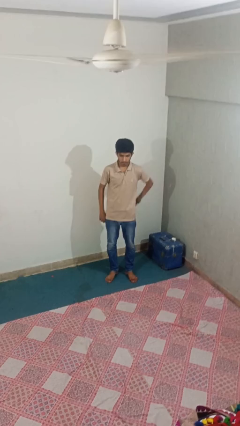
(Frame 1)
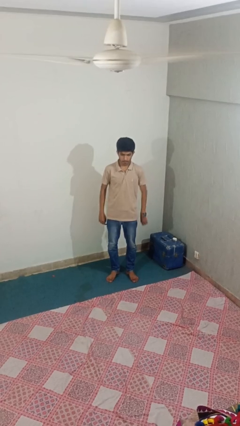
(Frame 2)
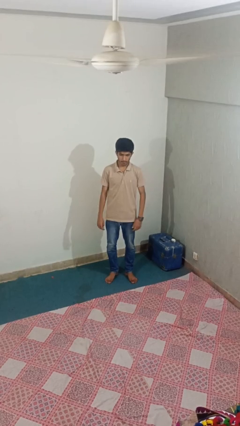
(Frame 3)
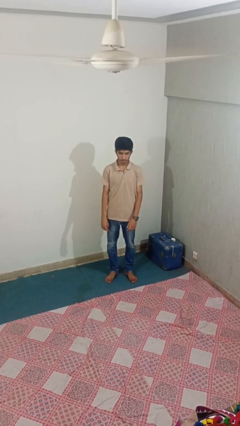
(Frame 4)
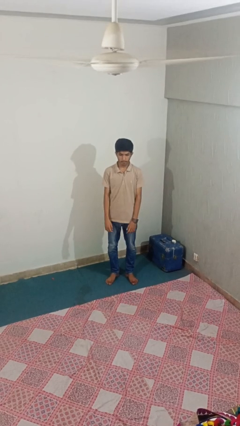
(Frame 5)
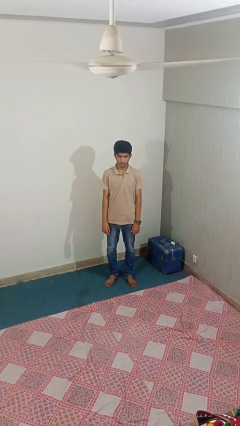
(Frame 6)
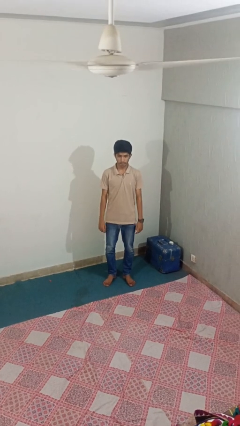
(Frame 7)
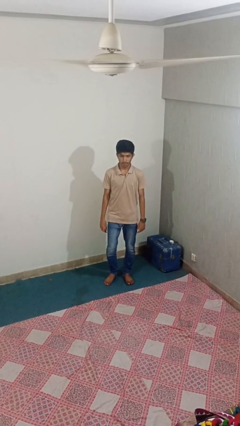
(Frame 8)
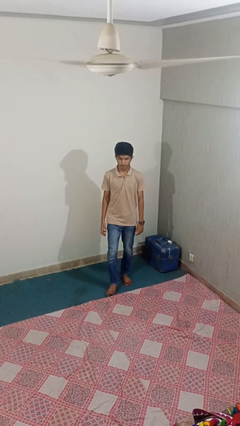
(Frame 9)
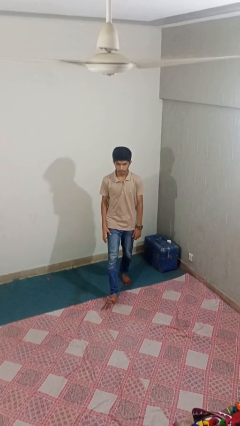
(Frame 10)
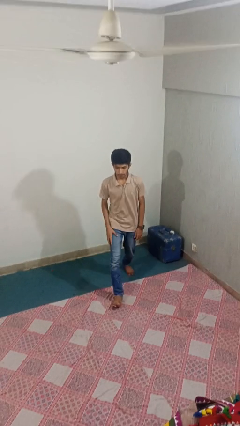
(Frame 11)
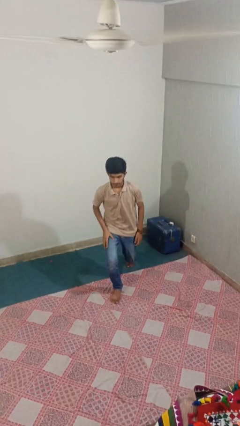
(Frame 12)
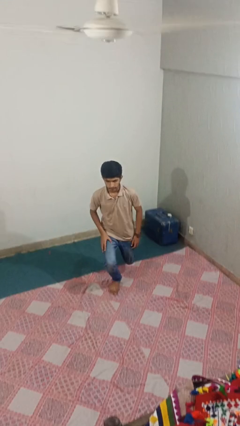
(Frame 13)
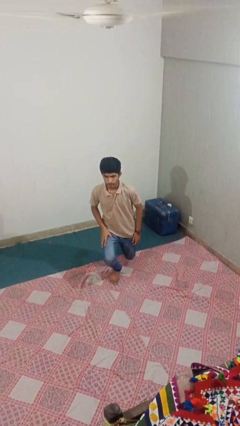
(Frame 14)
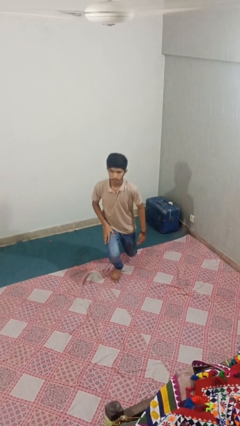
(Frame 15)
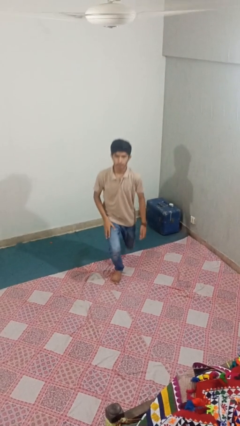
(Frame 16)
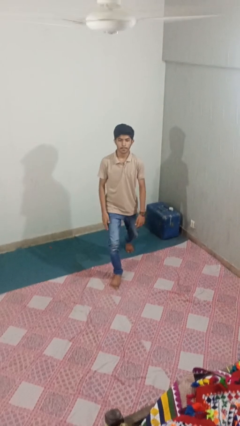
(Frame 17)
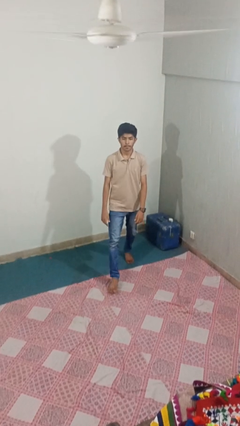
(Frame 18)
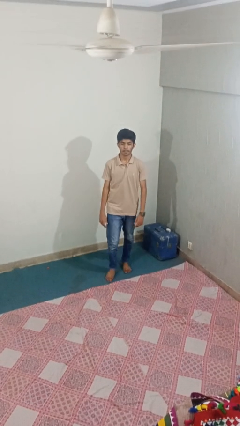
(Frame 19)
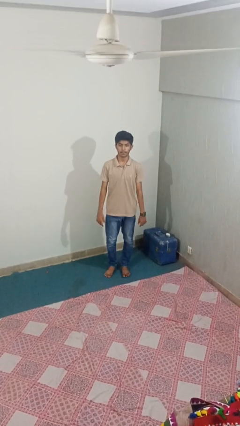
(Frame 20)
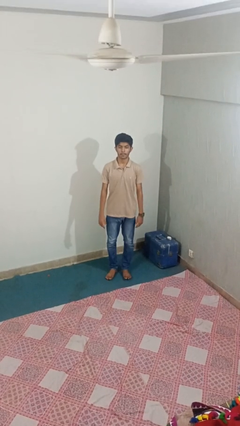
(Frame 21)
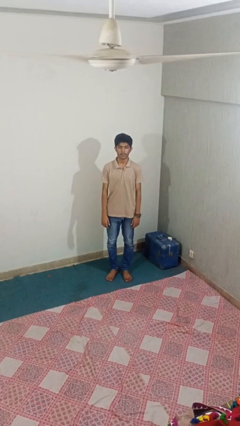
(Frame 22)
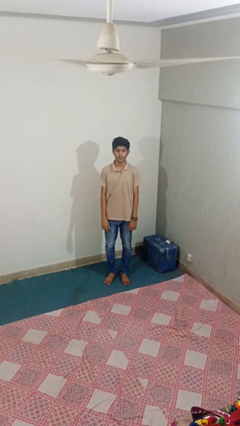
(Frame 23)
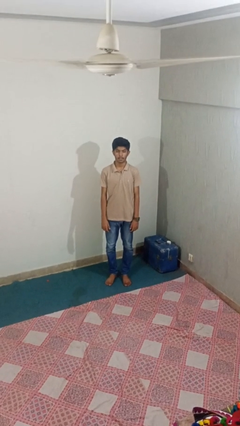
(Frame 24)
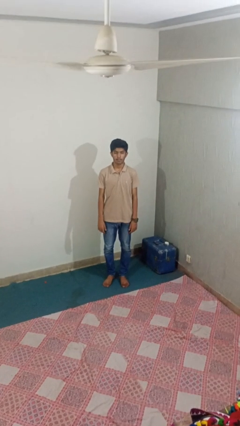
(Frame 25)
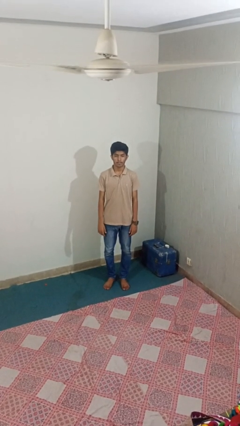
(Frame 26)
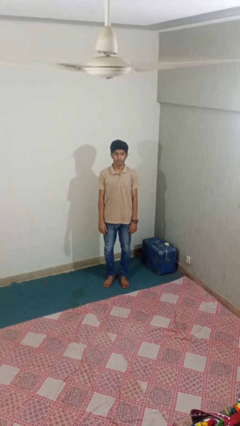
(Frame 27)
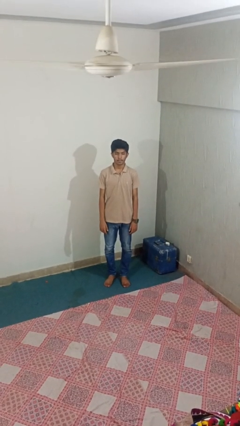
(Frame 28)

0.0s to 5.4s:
person exercises with lunges

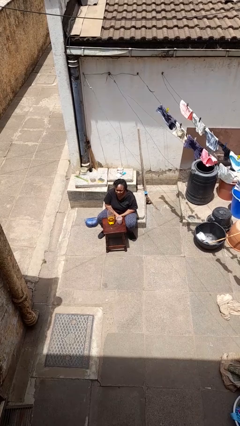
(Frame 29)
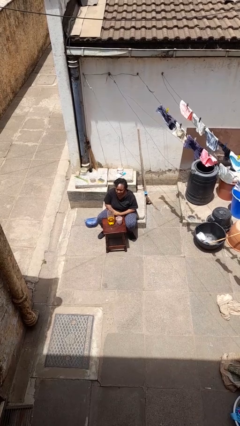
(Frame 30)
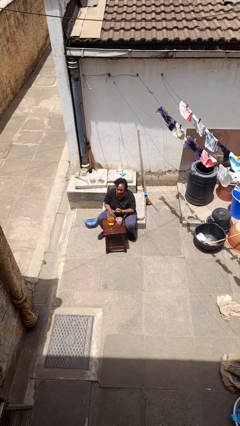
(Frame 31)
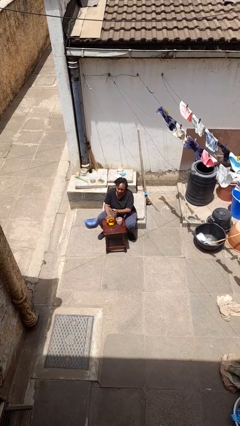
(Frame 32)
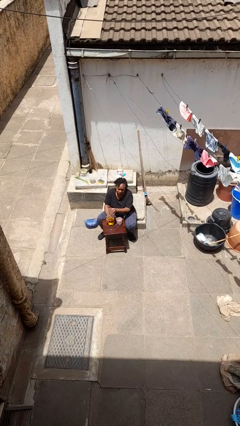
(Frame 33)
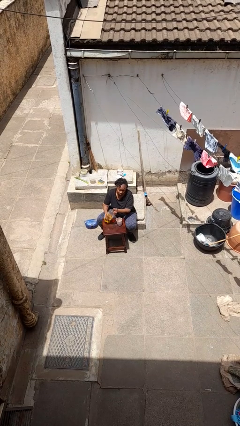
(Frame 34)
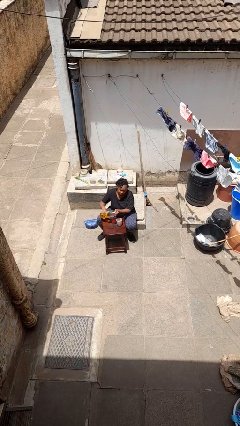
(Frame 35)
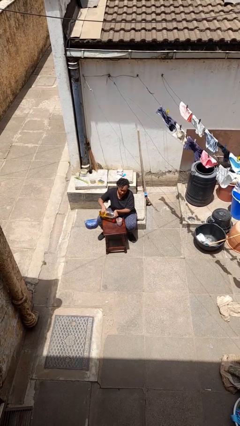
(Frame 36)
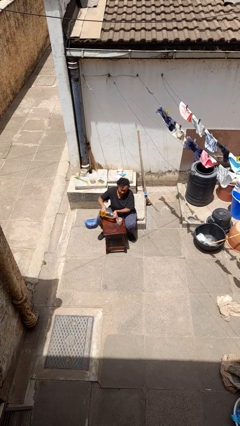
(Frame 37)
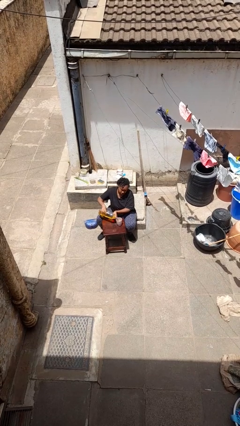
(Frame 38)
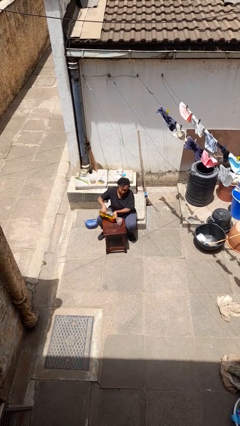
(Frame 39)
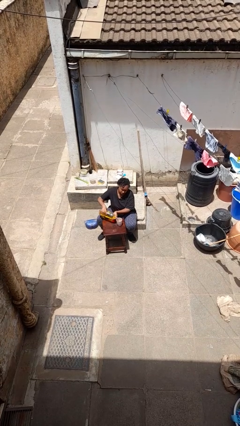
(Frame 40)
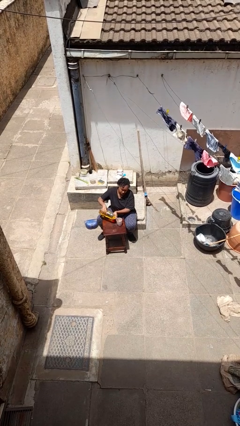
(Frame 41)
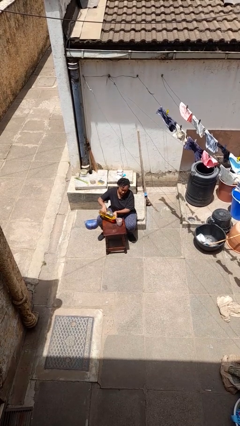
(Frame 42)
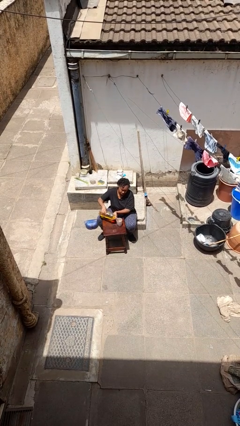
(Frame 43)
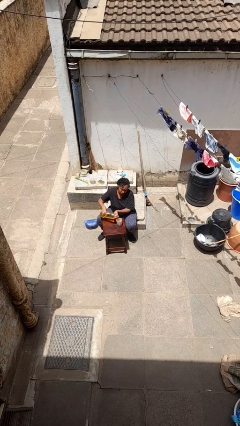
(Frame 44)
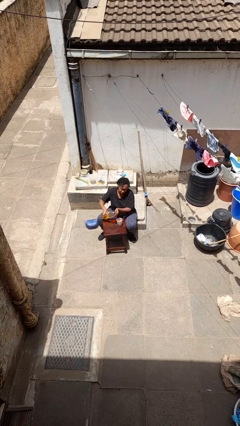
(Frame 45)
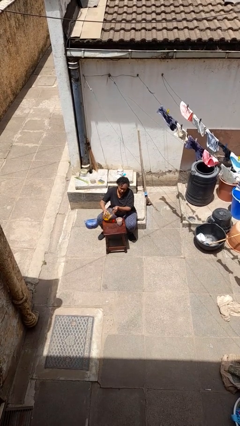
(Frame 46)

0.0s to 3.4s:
person pours liquid into cup

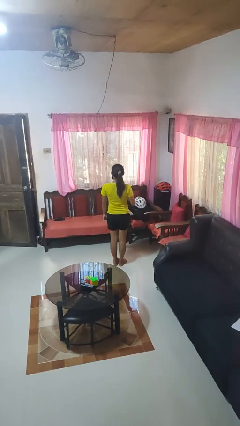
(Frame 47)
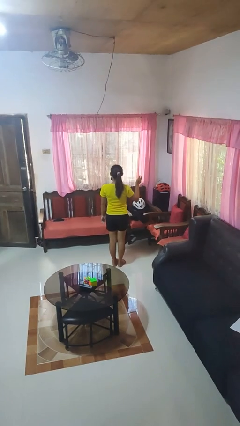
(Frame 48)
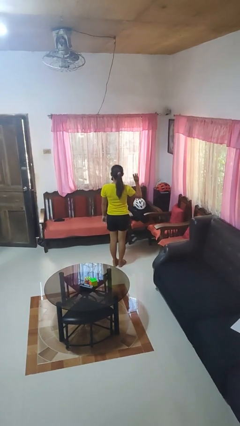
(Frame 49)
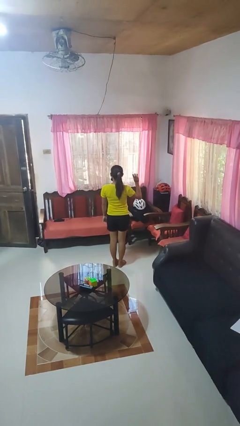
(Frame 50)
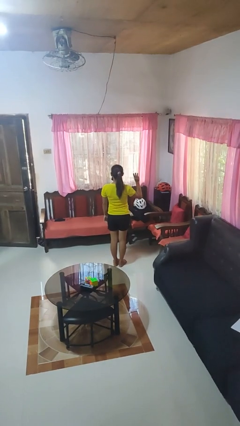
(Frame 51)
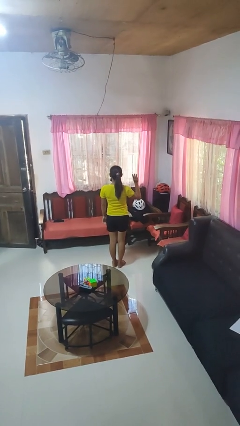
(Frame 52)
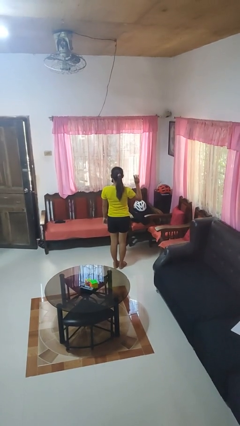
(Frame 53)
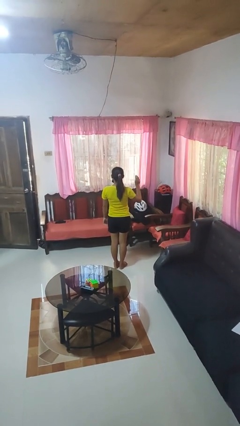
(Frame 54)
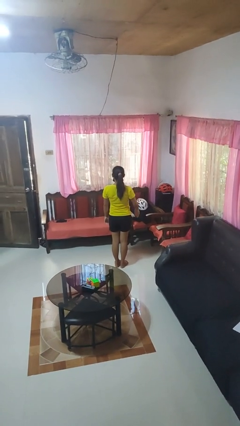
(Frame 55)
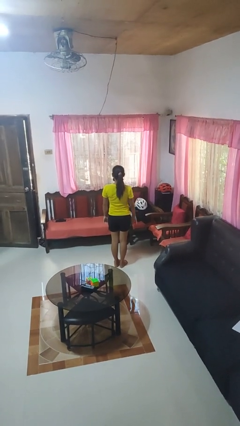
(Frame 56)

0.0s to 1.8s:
person gestures number three

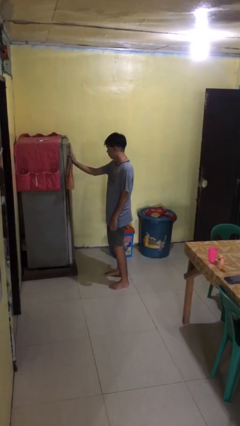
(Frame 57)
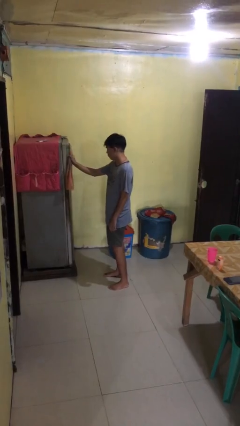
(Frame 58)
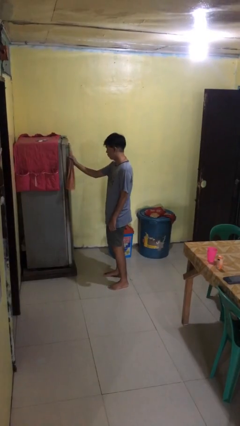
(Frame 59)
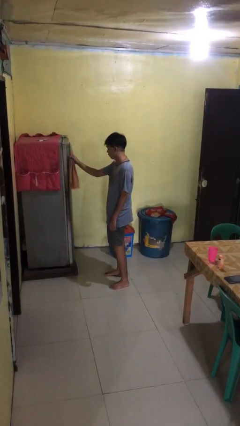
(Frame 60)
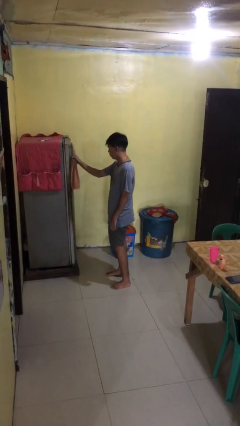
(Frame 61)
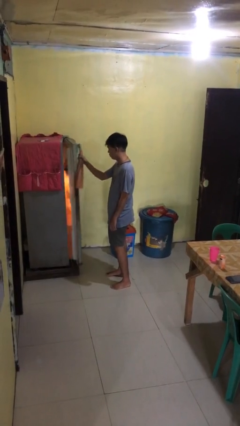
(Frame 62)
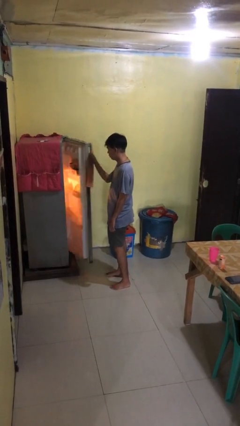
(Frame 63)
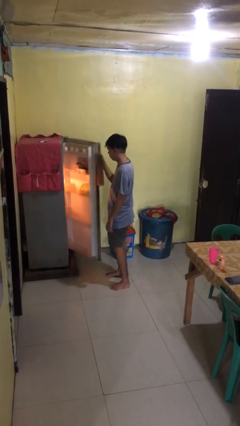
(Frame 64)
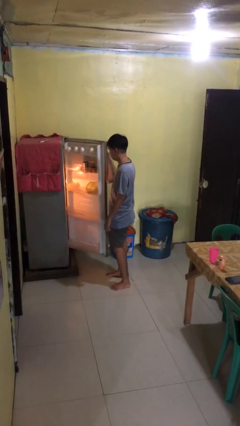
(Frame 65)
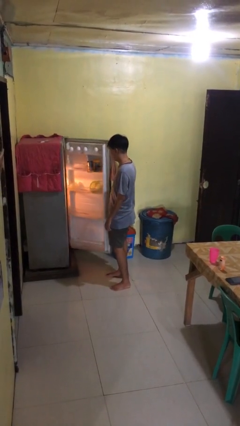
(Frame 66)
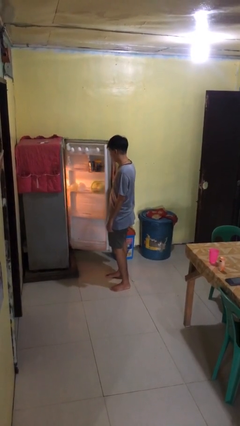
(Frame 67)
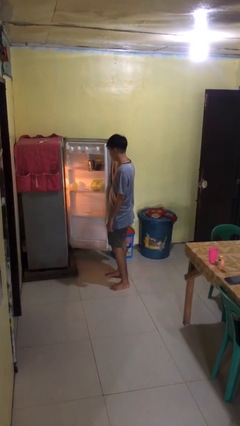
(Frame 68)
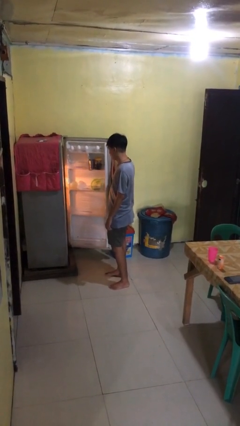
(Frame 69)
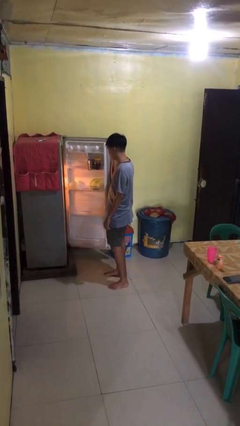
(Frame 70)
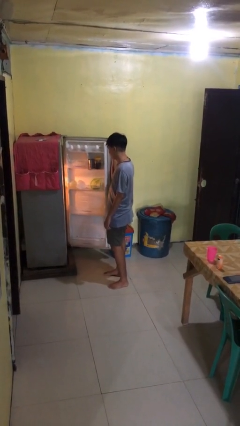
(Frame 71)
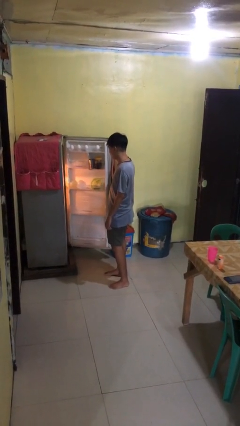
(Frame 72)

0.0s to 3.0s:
person opens refrigerator

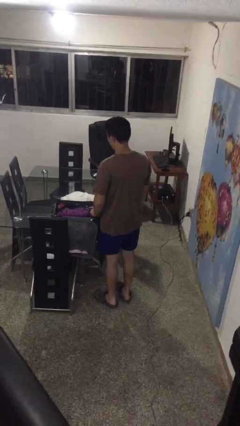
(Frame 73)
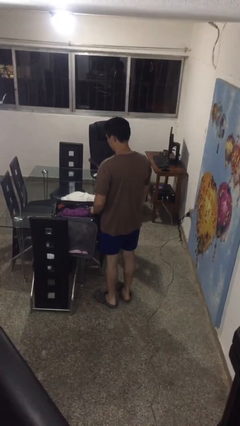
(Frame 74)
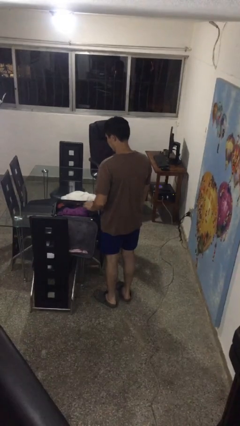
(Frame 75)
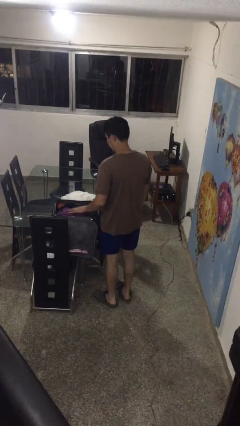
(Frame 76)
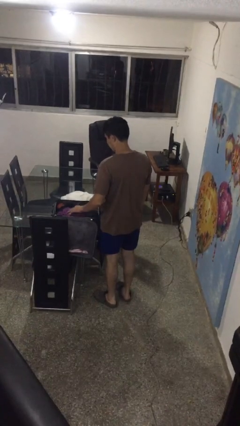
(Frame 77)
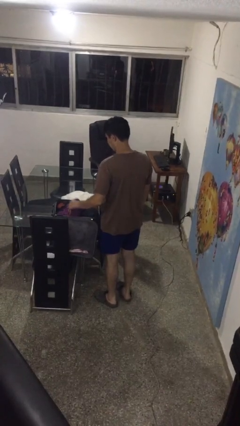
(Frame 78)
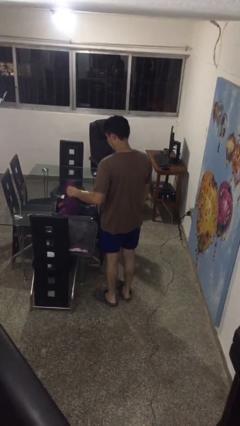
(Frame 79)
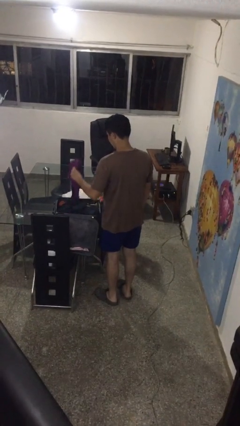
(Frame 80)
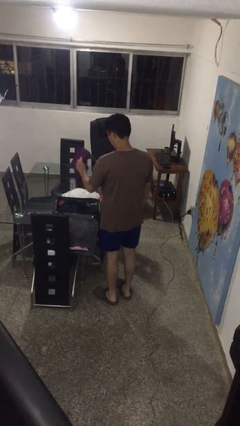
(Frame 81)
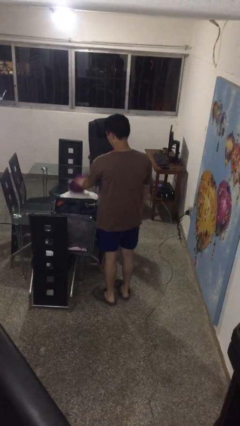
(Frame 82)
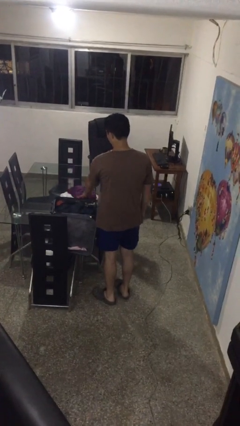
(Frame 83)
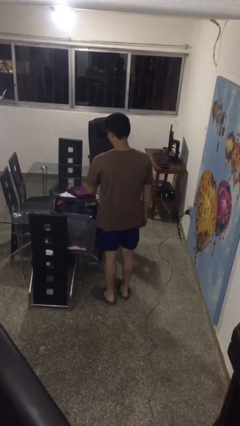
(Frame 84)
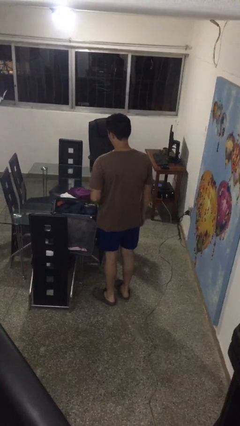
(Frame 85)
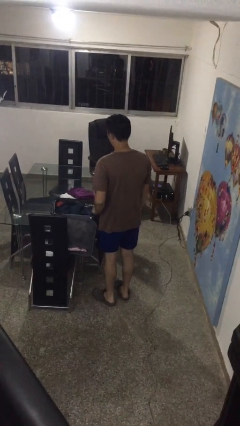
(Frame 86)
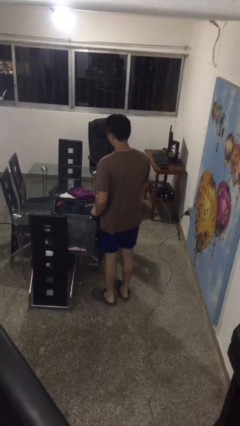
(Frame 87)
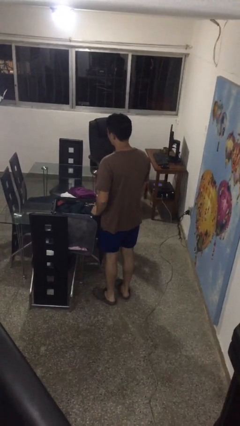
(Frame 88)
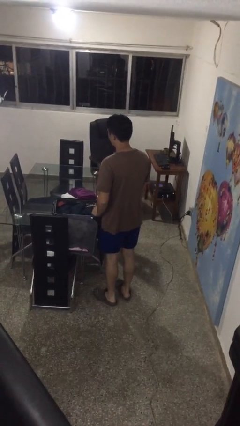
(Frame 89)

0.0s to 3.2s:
person unloads clothes from suitcase

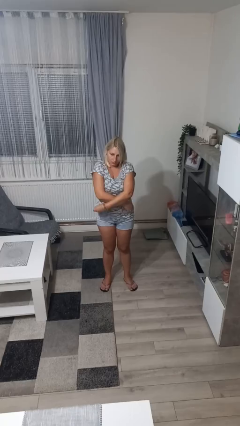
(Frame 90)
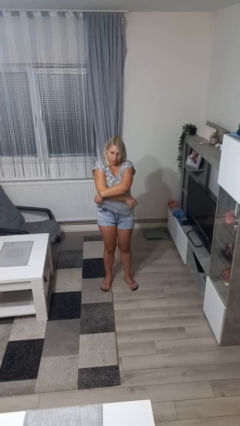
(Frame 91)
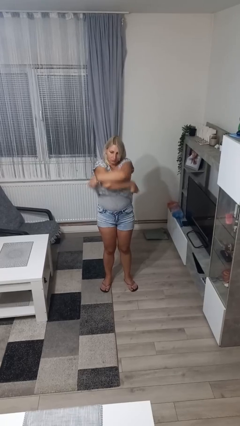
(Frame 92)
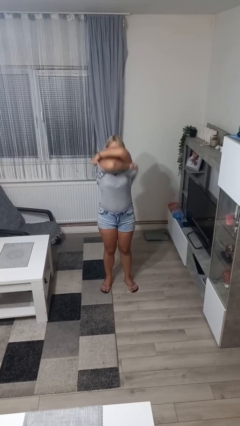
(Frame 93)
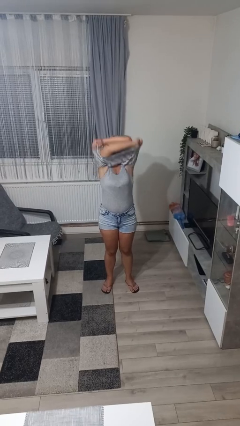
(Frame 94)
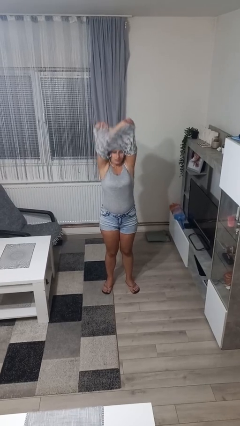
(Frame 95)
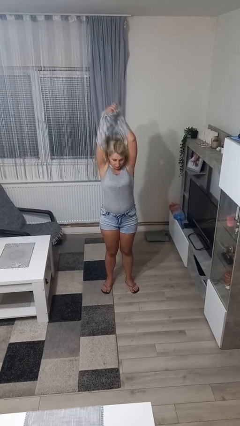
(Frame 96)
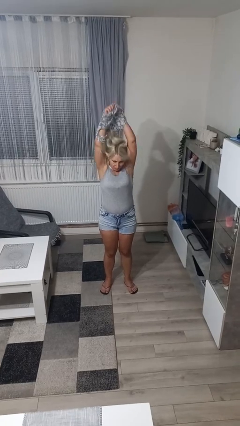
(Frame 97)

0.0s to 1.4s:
person takes off shirt
